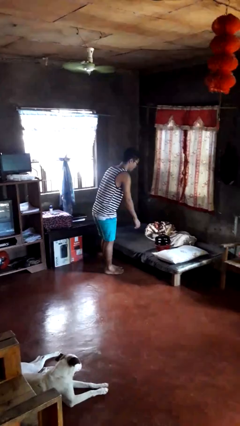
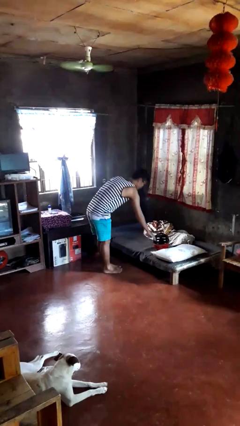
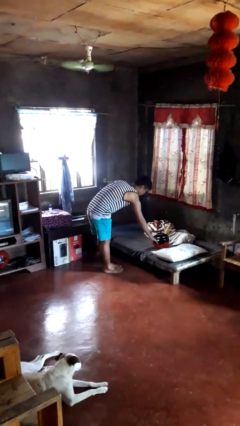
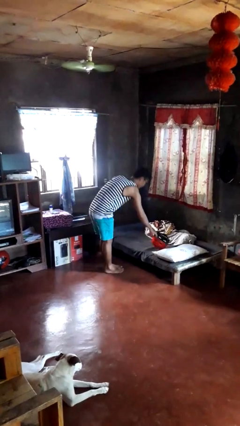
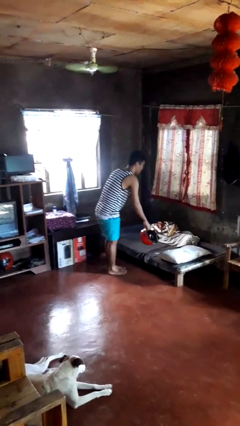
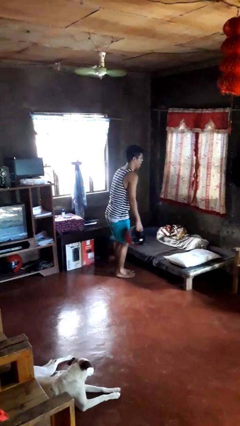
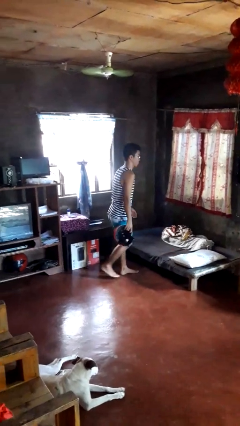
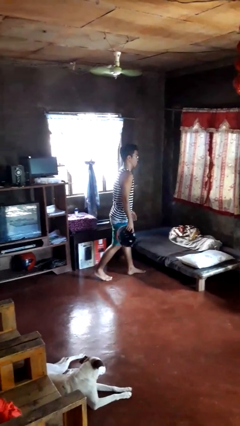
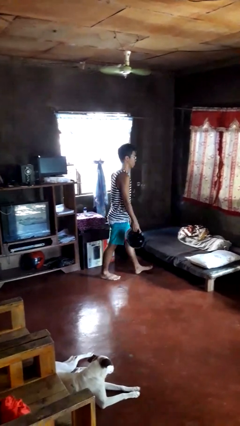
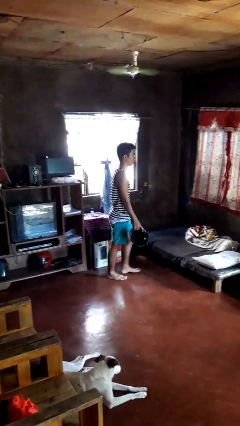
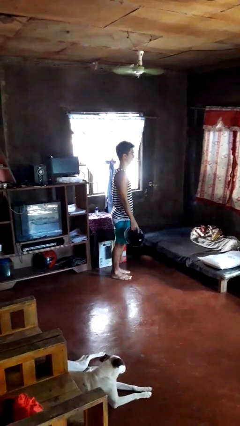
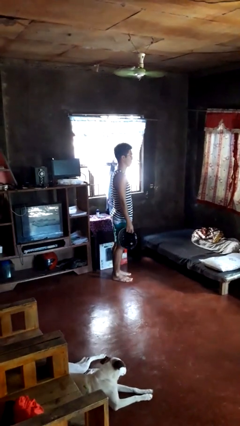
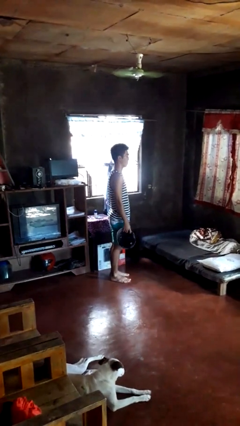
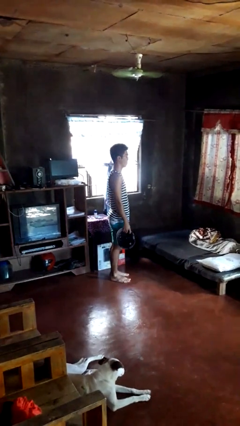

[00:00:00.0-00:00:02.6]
person picks up object from bed

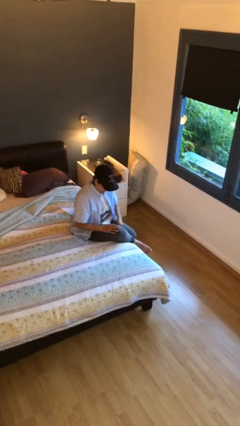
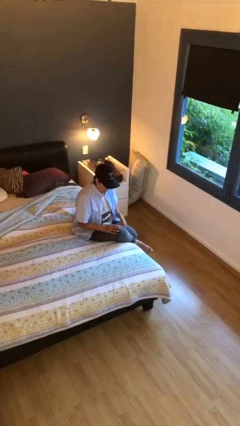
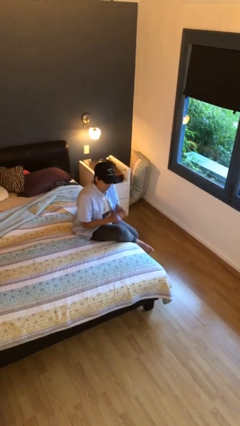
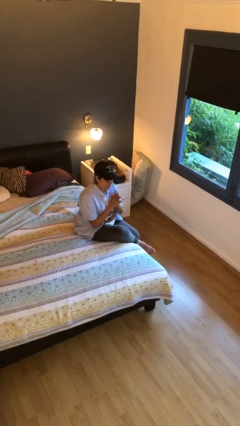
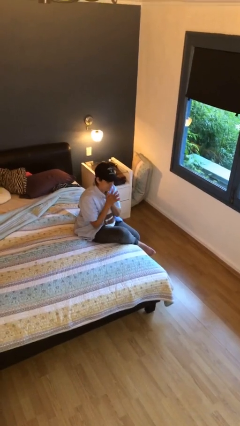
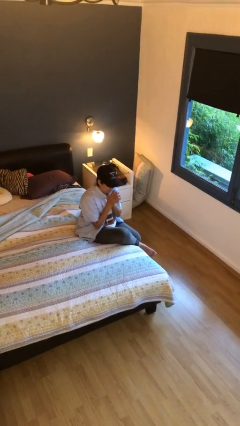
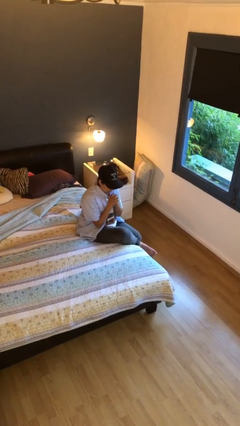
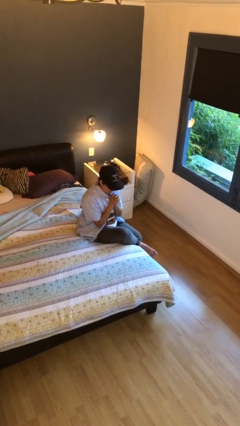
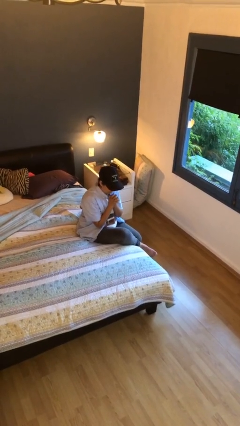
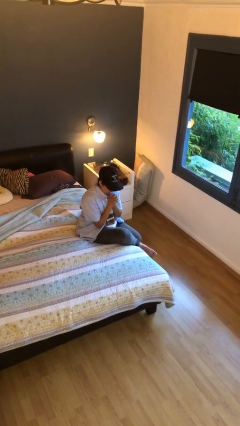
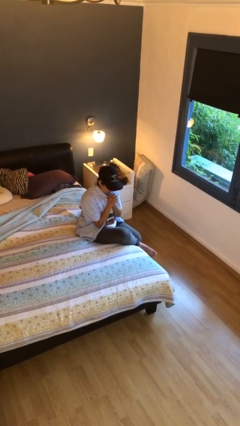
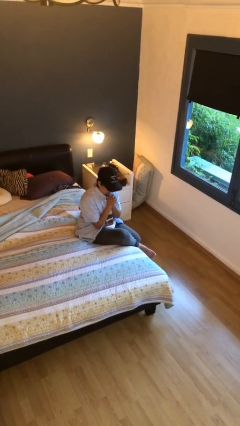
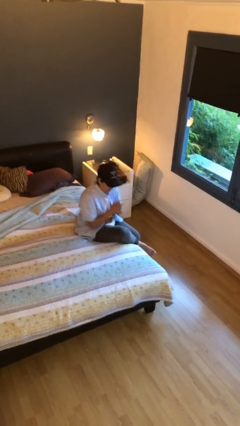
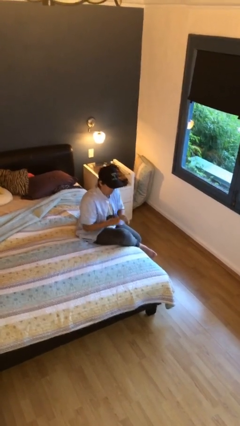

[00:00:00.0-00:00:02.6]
person prays

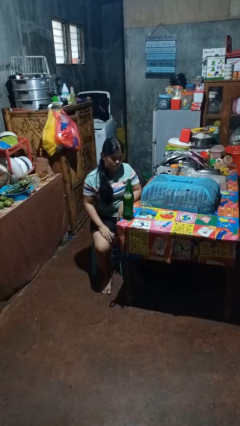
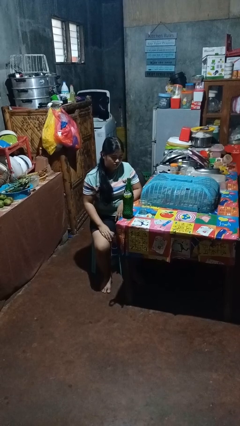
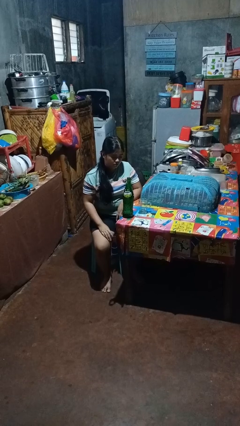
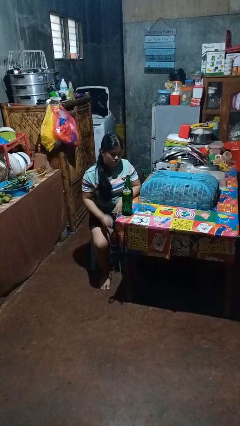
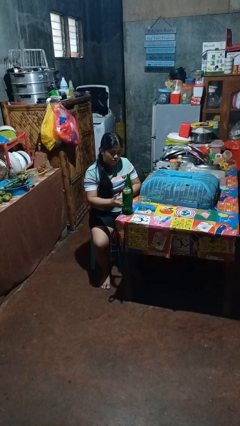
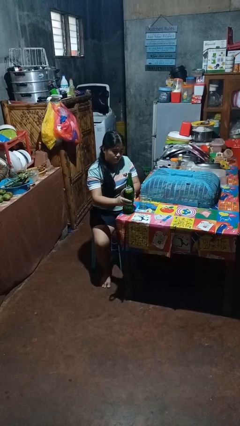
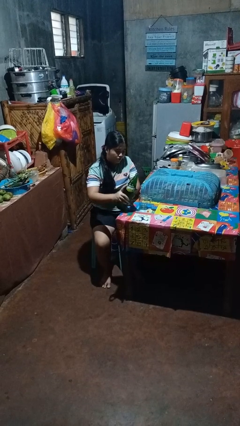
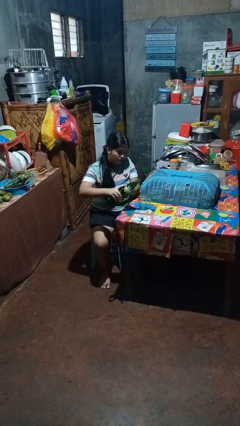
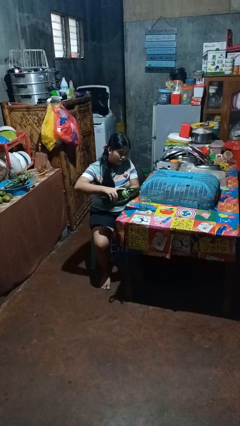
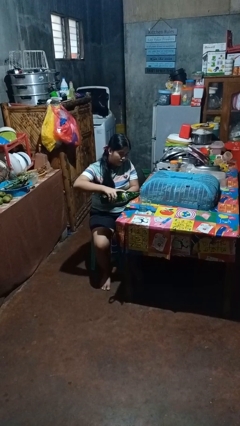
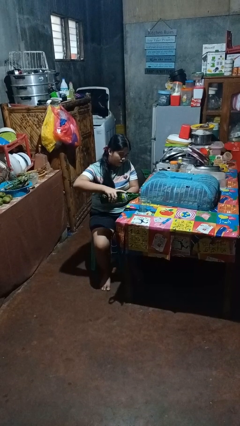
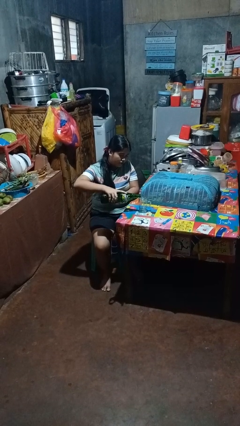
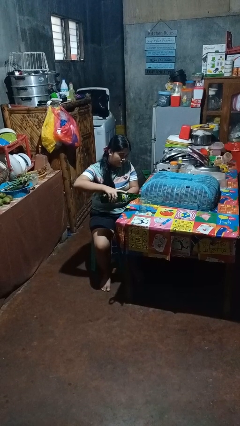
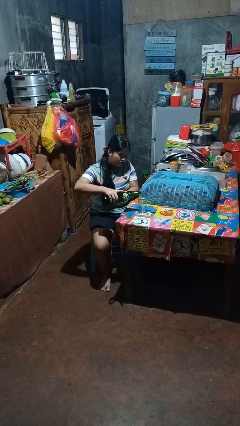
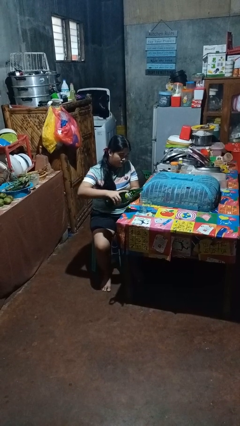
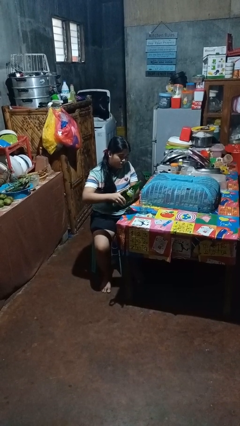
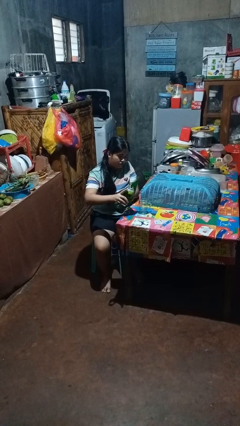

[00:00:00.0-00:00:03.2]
person pours liquid into cup

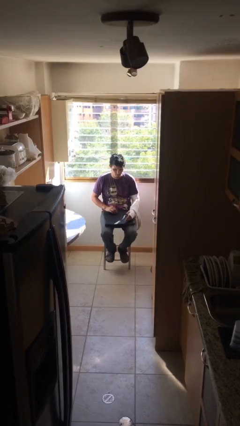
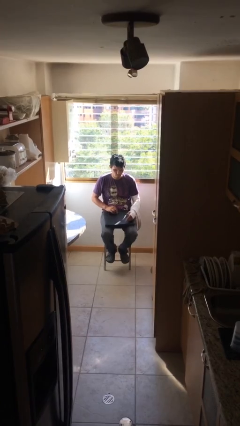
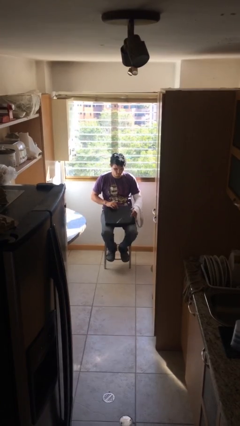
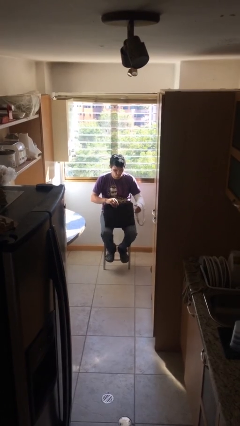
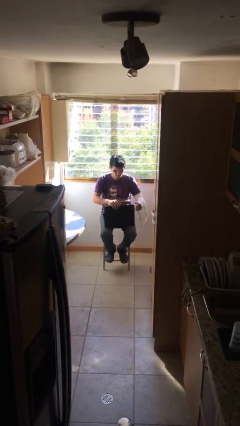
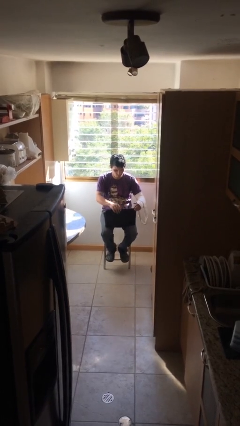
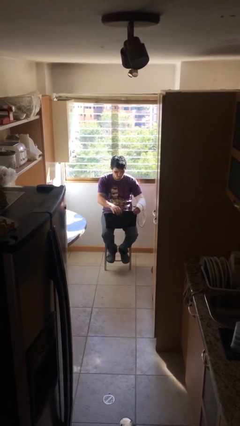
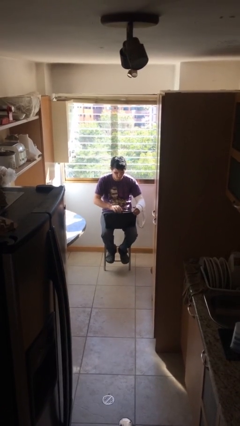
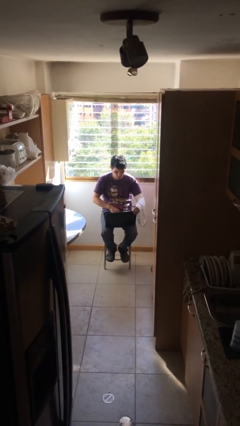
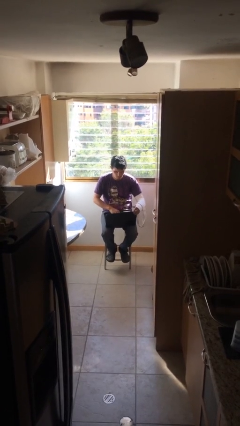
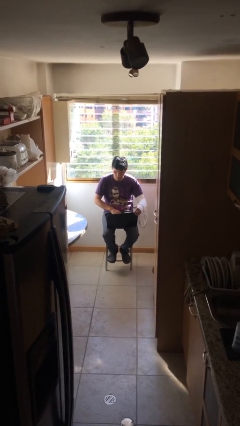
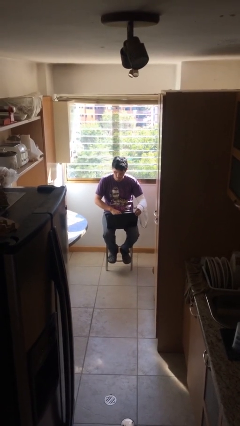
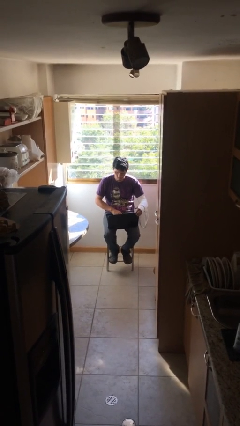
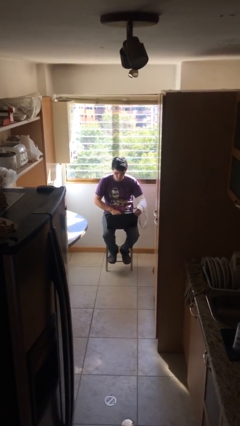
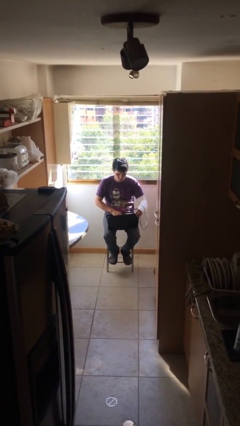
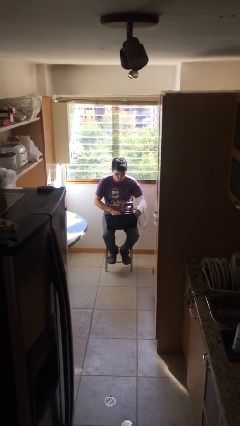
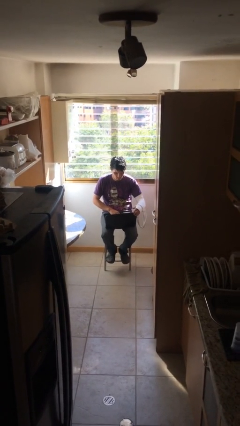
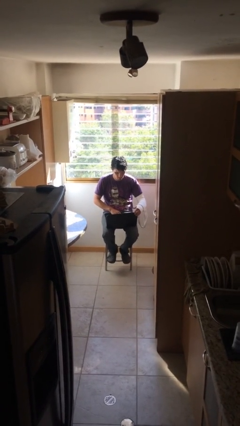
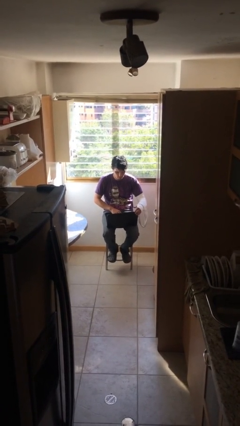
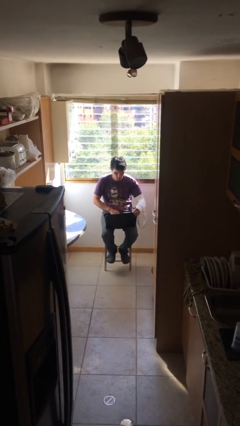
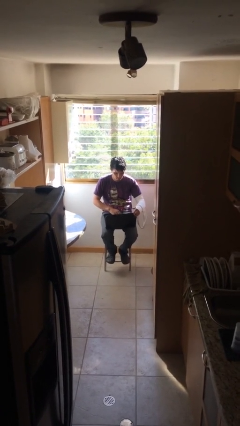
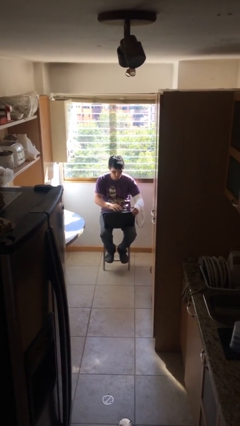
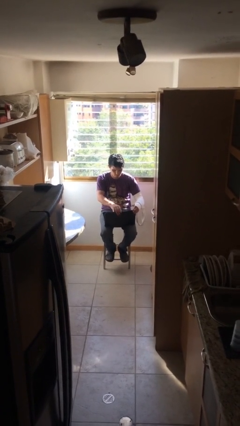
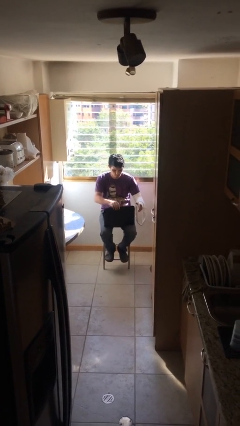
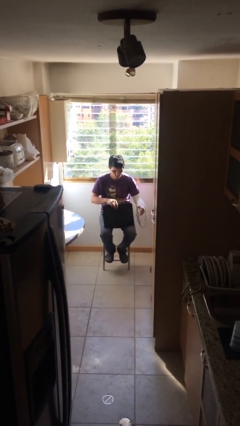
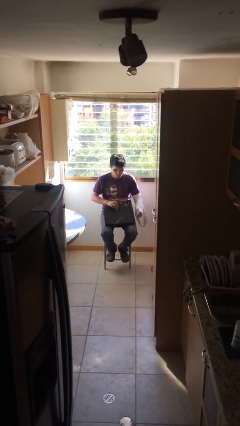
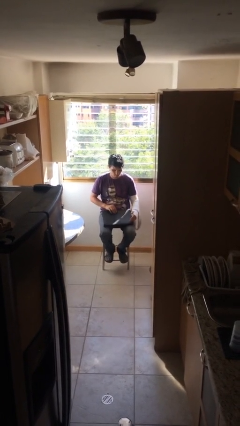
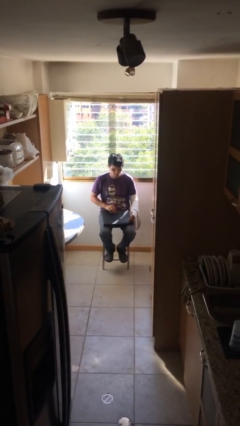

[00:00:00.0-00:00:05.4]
person interacts with laptop

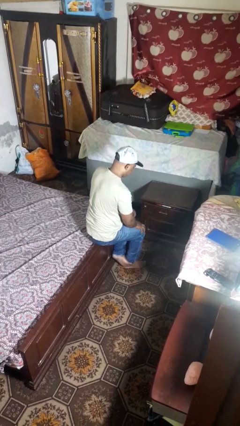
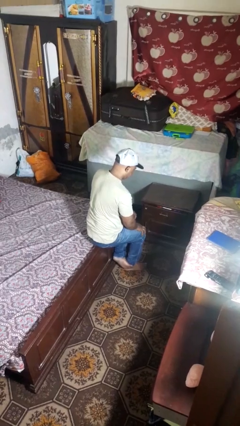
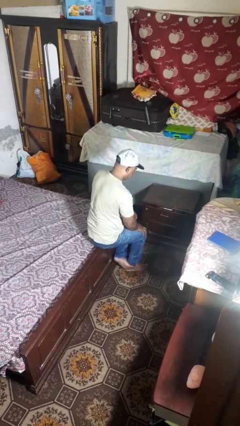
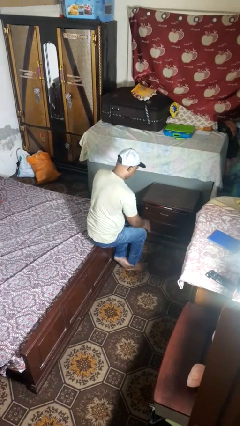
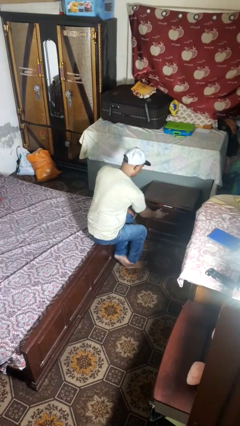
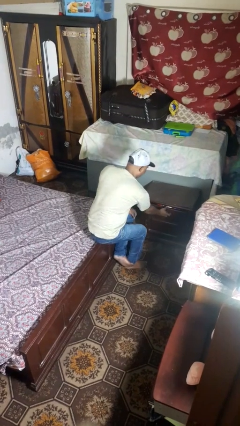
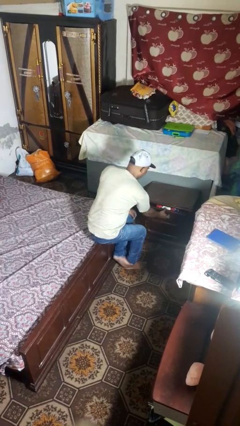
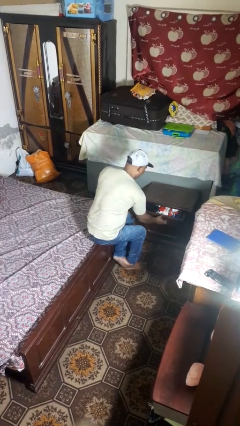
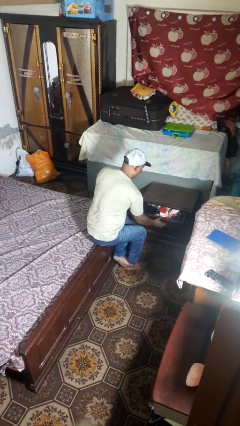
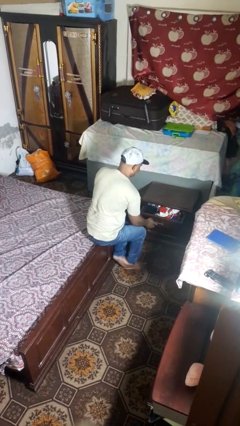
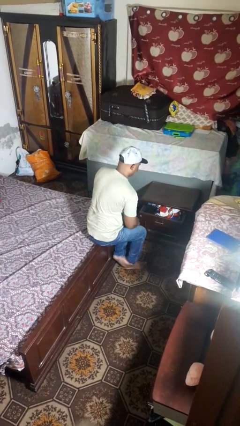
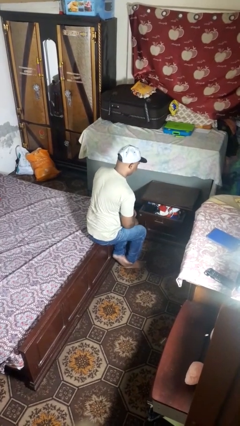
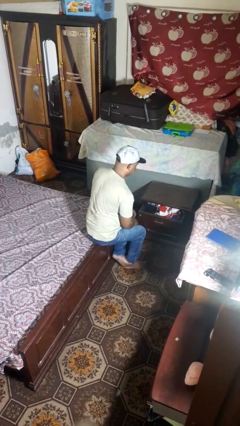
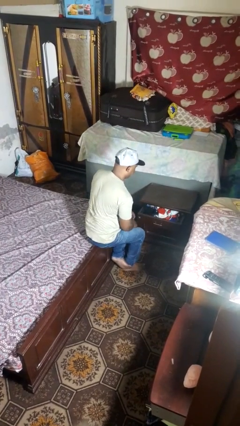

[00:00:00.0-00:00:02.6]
person opens dresser drawer

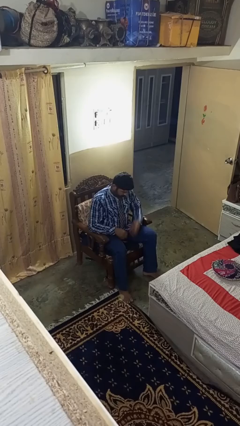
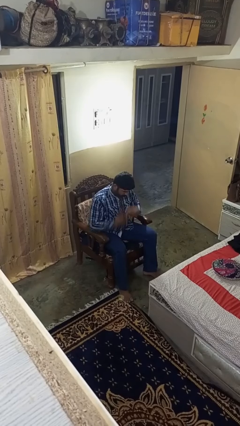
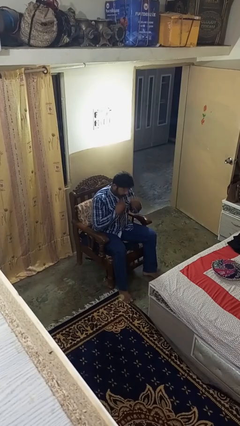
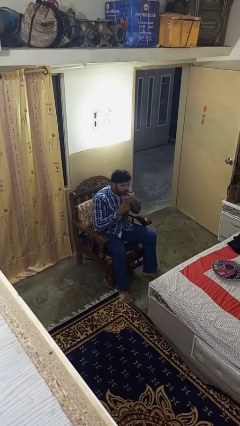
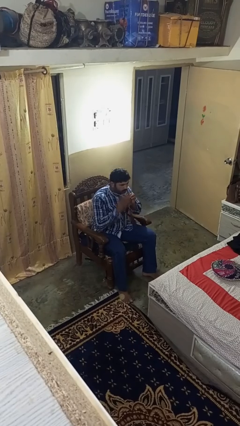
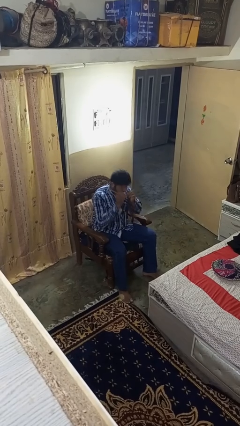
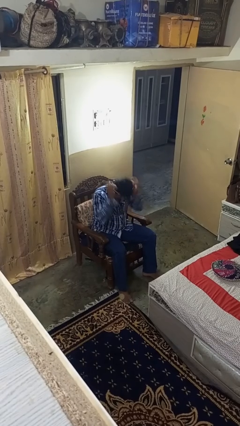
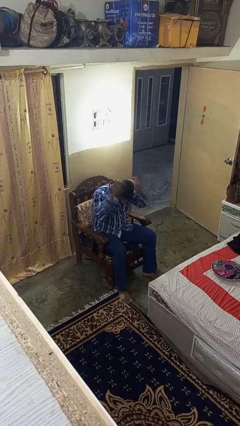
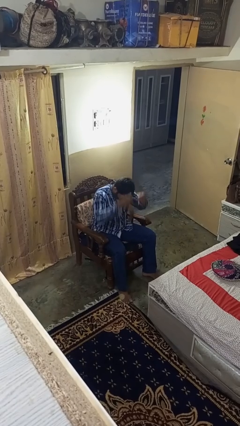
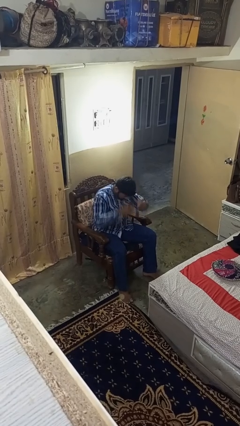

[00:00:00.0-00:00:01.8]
person takes off necktie
